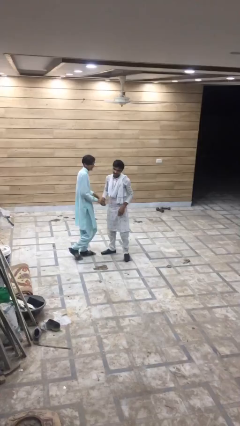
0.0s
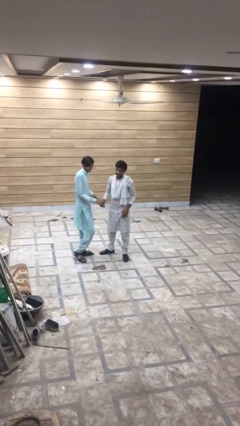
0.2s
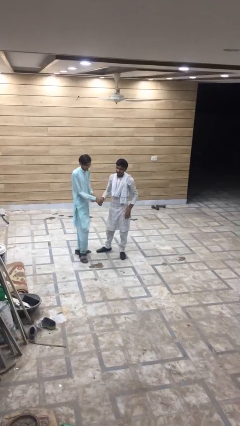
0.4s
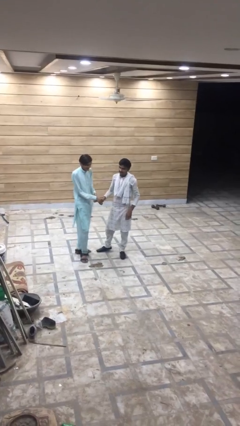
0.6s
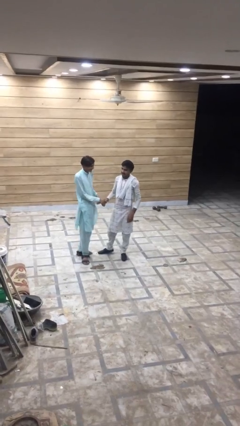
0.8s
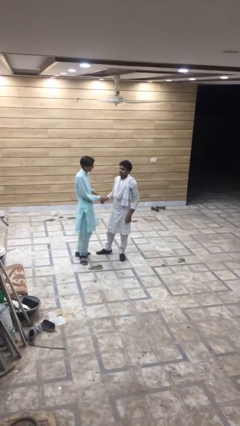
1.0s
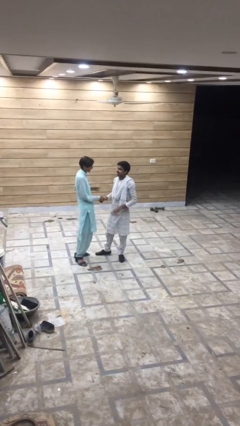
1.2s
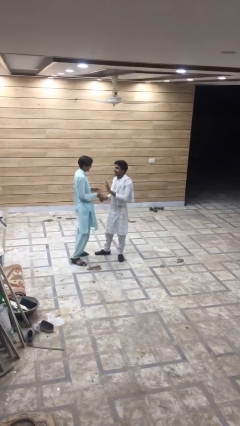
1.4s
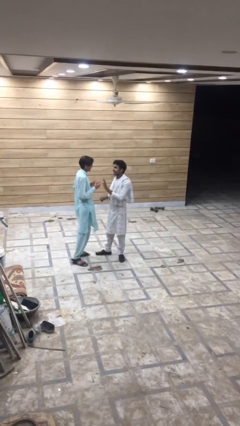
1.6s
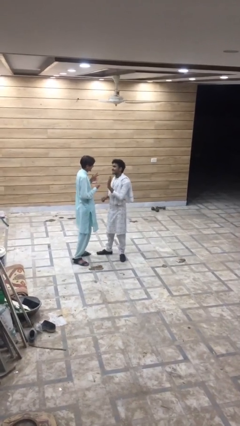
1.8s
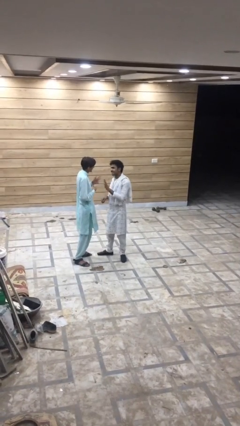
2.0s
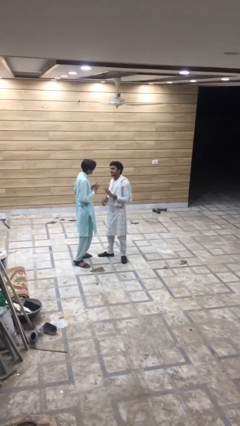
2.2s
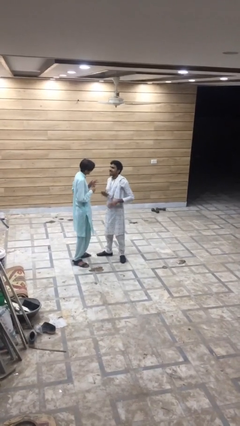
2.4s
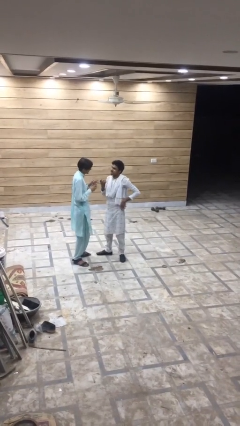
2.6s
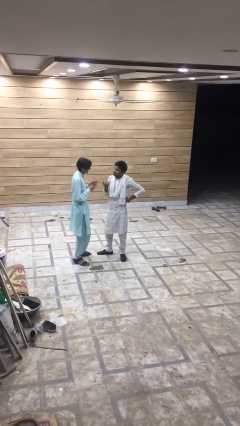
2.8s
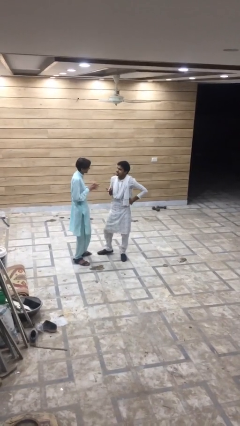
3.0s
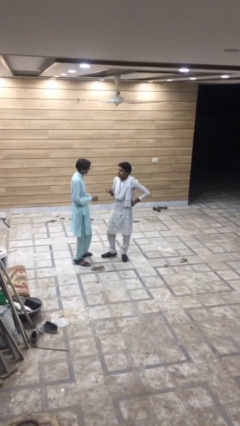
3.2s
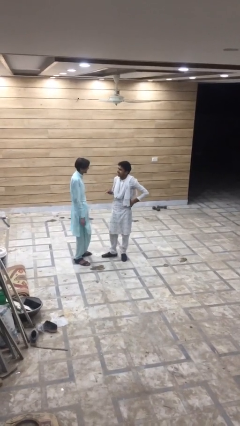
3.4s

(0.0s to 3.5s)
person talks to person

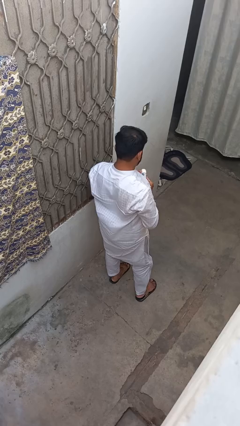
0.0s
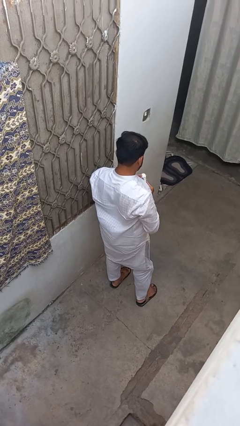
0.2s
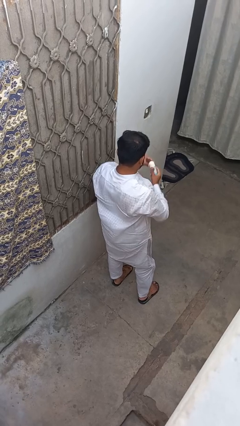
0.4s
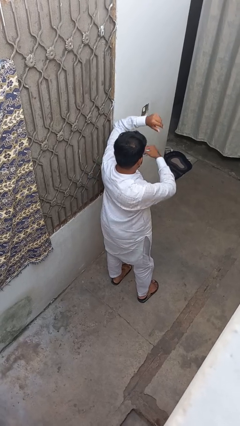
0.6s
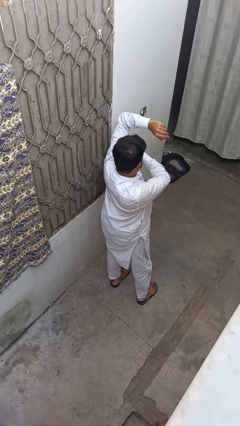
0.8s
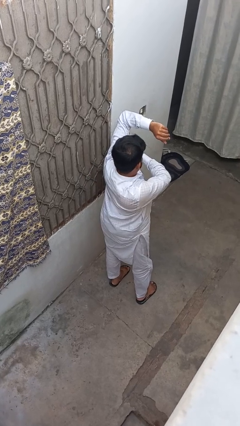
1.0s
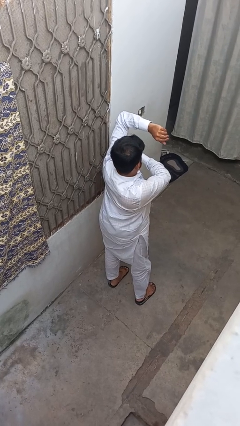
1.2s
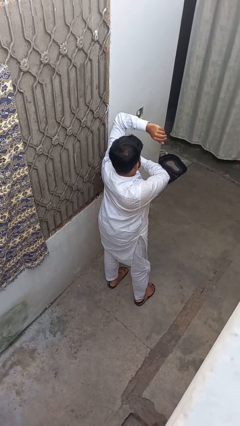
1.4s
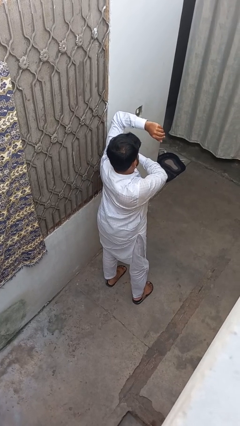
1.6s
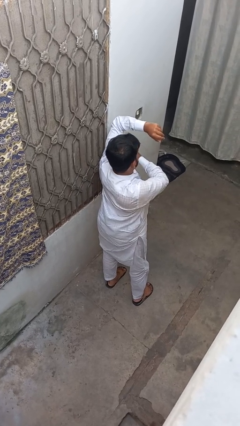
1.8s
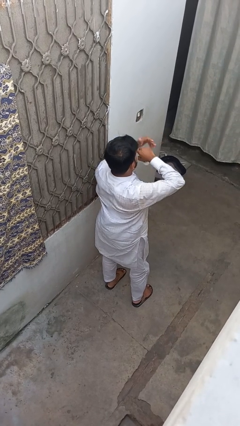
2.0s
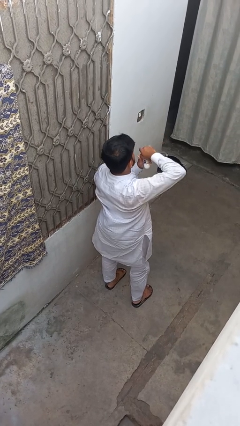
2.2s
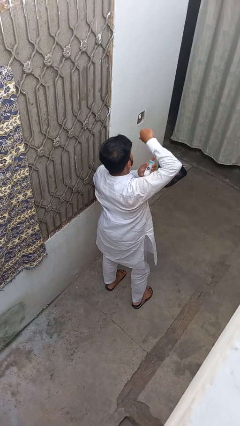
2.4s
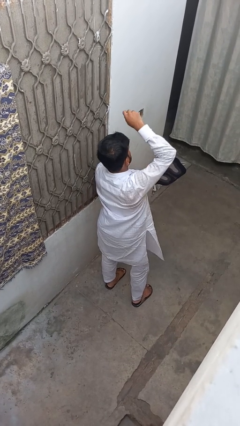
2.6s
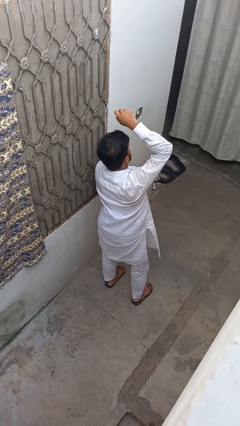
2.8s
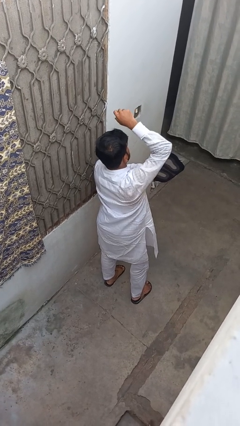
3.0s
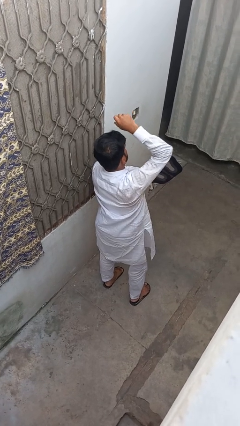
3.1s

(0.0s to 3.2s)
person applies deodorant

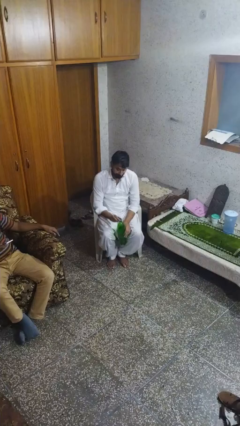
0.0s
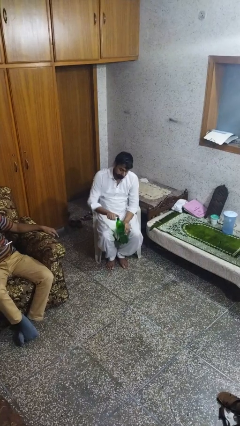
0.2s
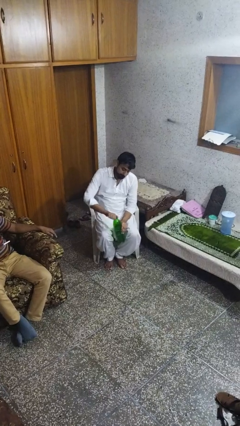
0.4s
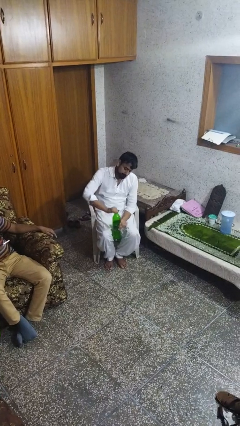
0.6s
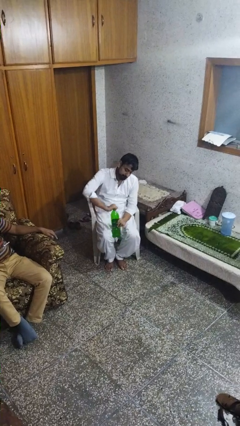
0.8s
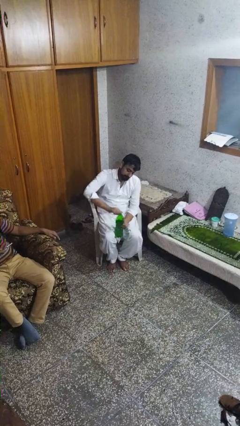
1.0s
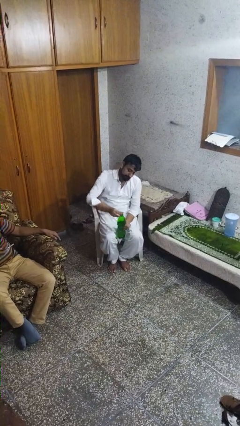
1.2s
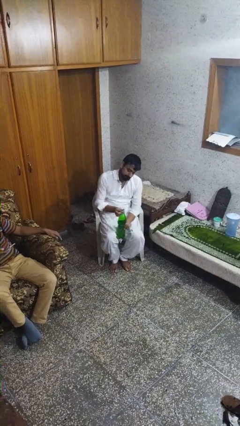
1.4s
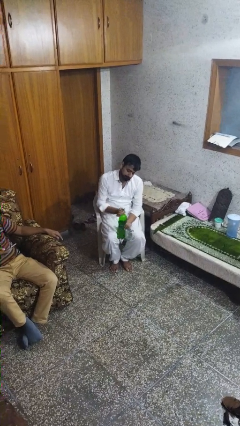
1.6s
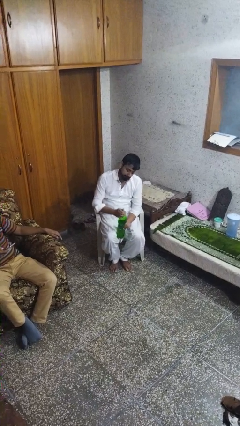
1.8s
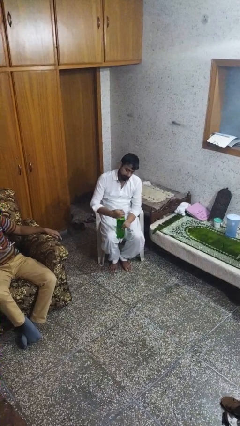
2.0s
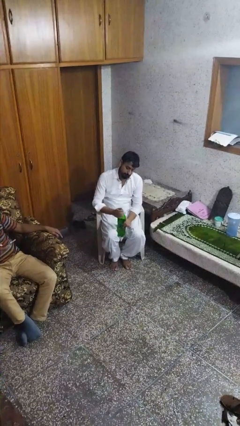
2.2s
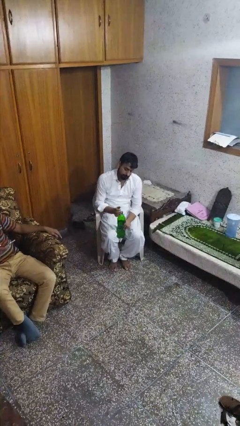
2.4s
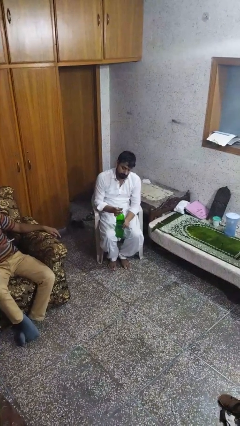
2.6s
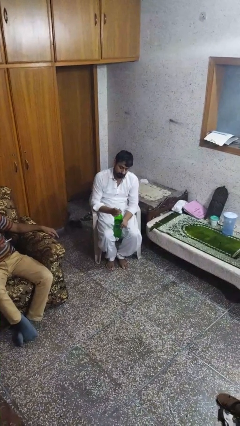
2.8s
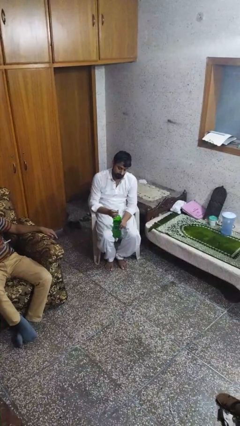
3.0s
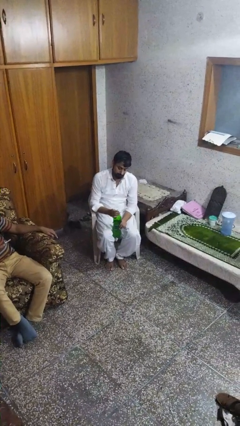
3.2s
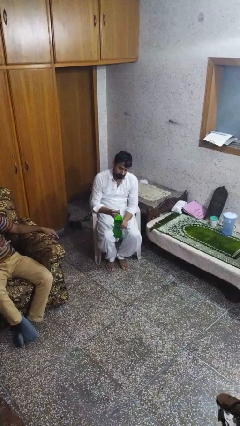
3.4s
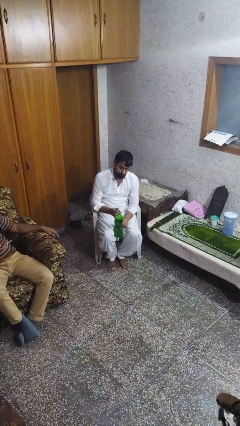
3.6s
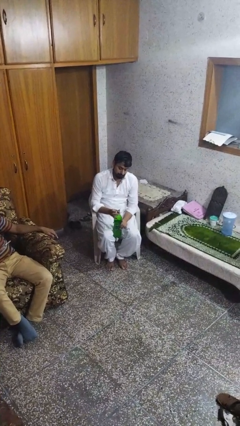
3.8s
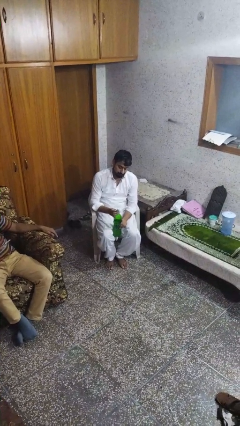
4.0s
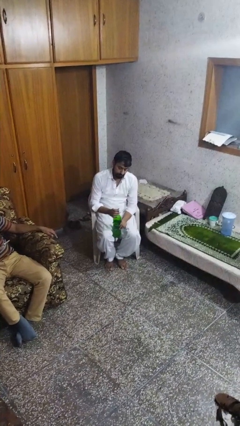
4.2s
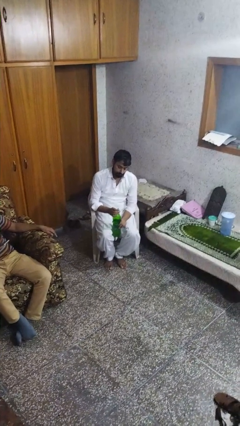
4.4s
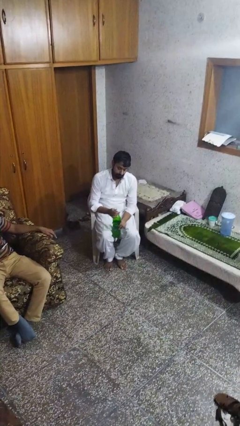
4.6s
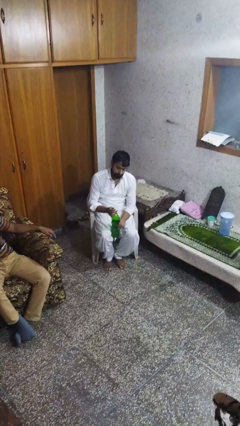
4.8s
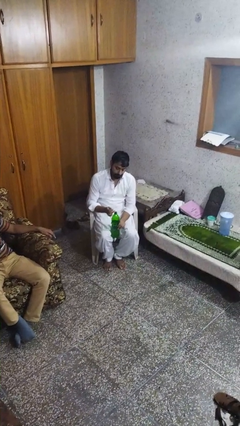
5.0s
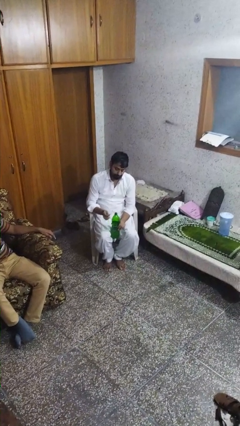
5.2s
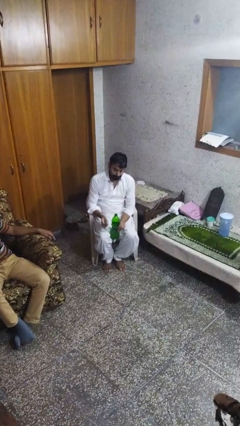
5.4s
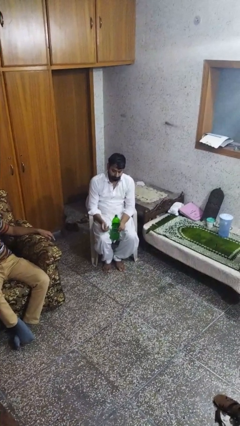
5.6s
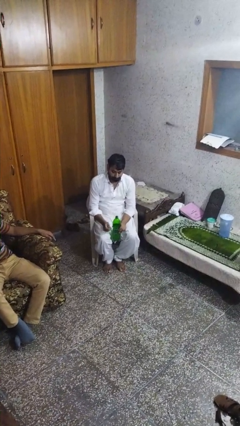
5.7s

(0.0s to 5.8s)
person unscrews lid from bottle

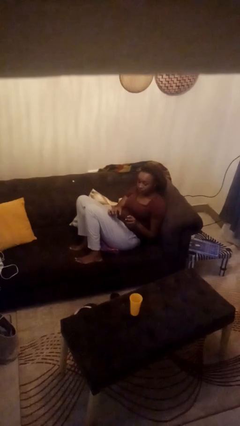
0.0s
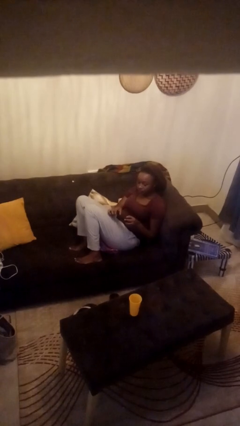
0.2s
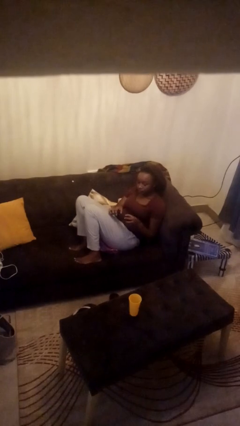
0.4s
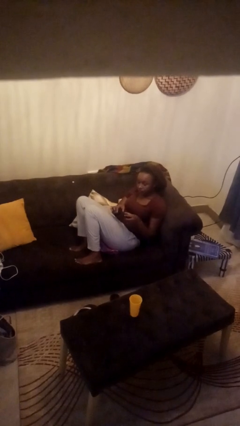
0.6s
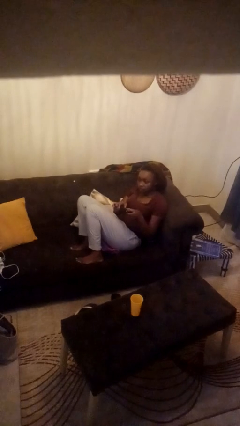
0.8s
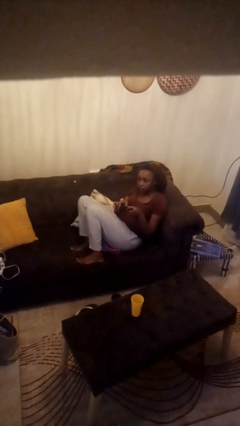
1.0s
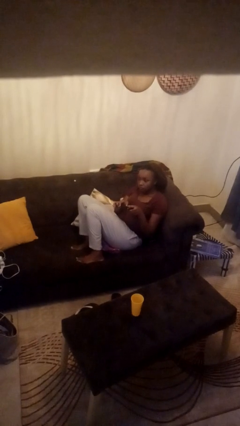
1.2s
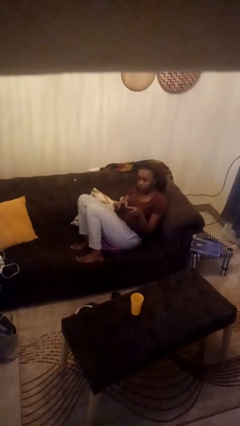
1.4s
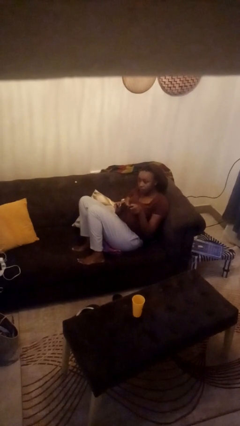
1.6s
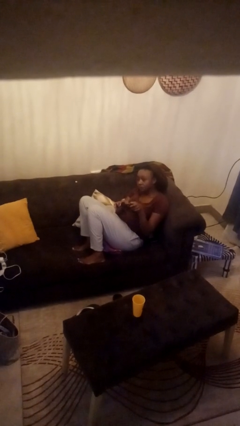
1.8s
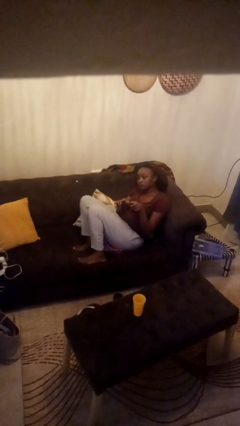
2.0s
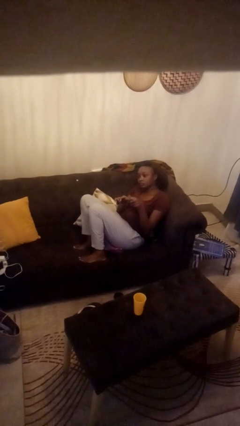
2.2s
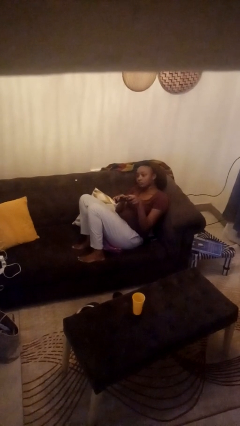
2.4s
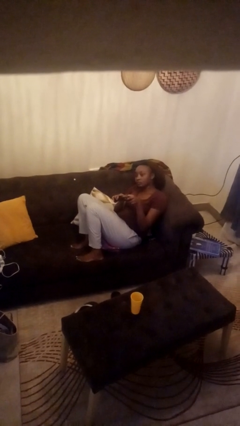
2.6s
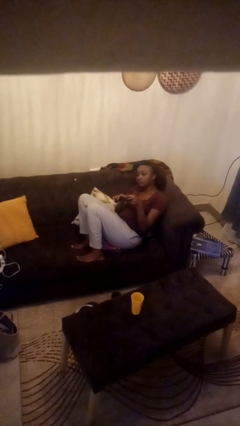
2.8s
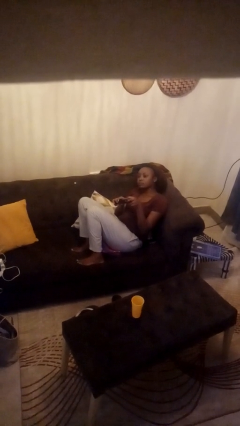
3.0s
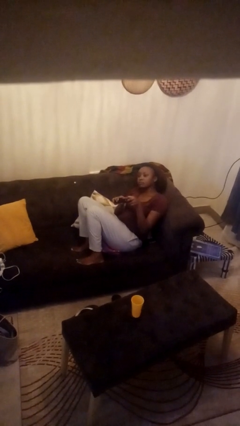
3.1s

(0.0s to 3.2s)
person interacts with handheld game

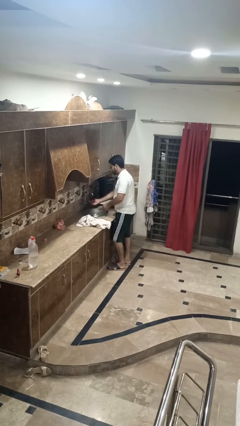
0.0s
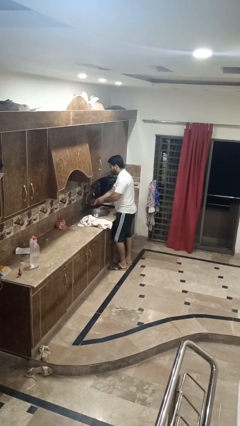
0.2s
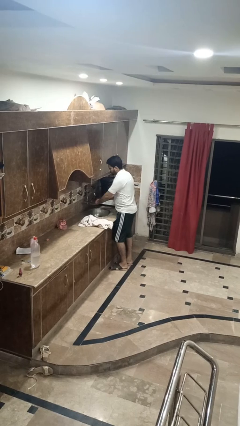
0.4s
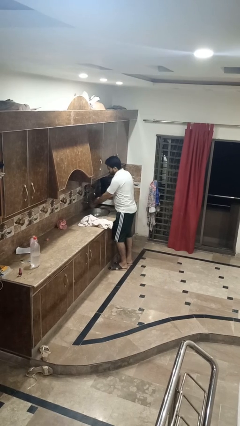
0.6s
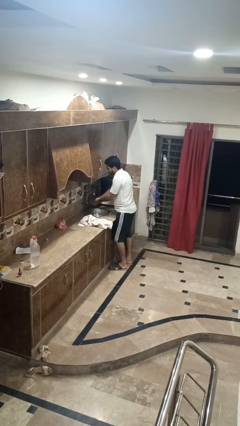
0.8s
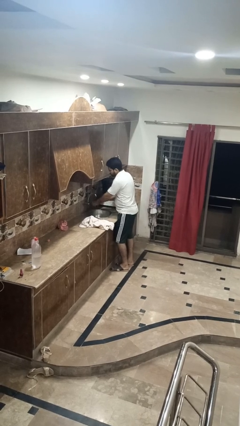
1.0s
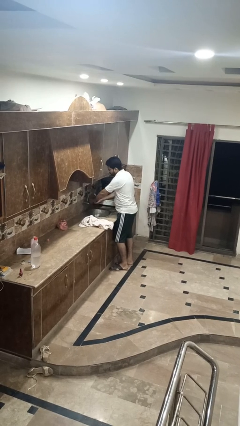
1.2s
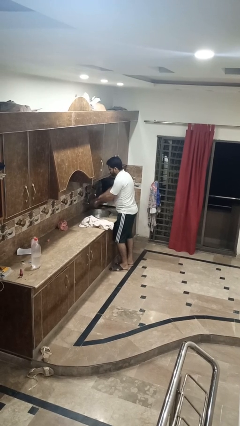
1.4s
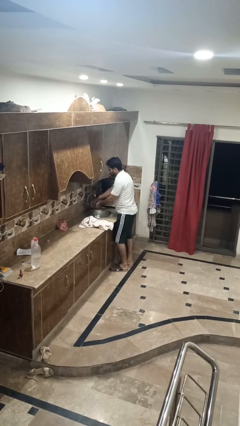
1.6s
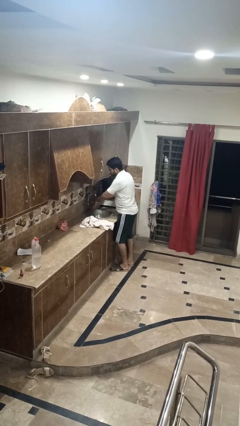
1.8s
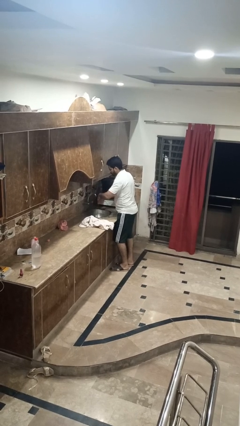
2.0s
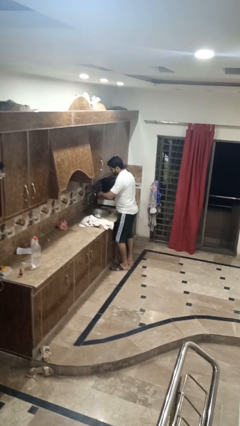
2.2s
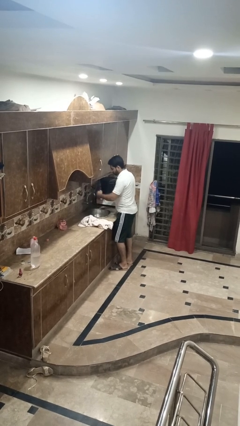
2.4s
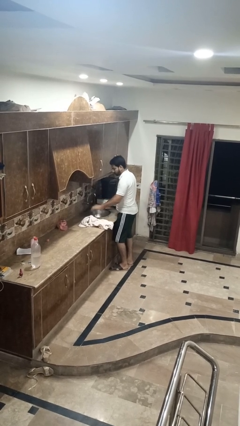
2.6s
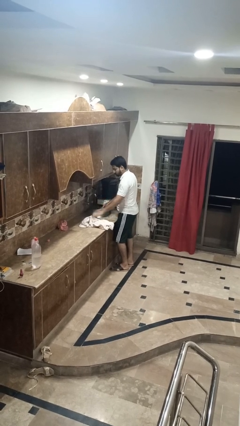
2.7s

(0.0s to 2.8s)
person washes hands
